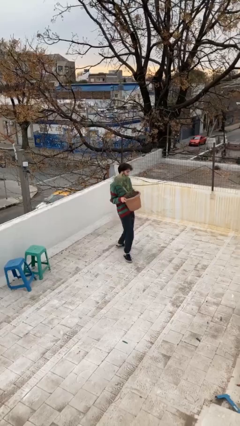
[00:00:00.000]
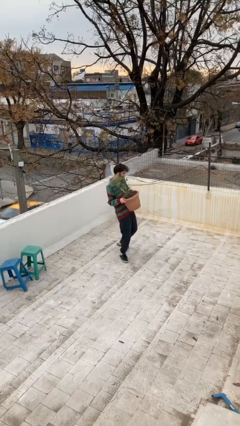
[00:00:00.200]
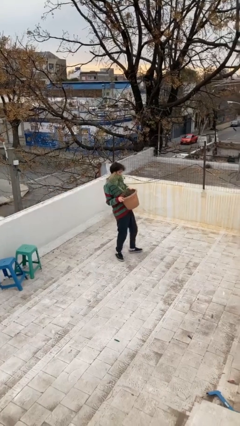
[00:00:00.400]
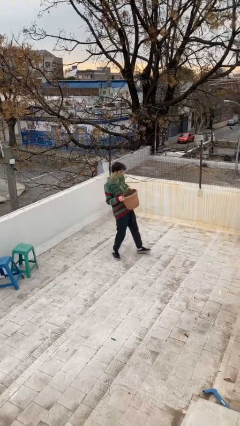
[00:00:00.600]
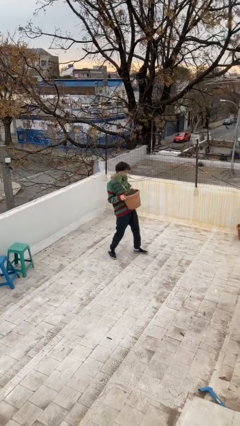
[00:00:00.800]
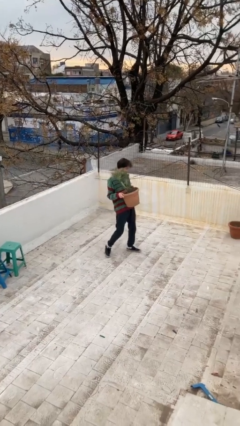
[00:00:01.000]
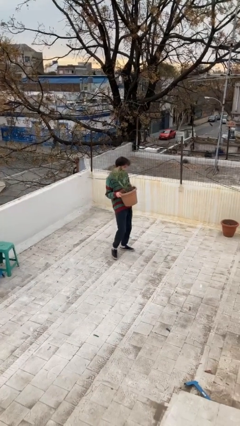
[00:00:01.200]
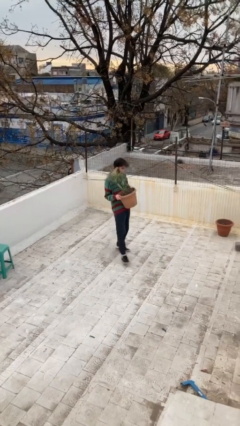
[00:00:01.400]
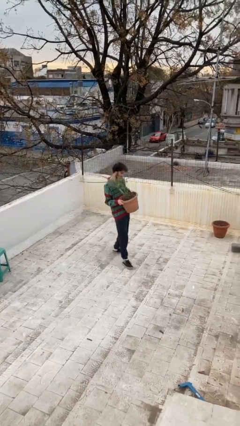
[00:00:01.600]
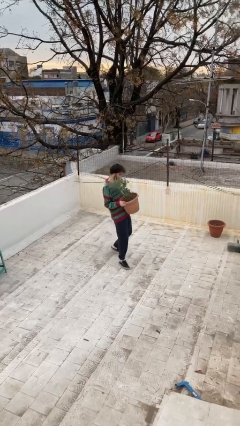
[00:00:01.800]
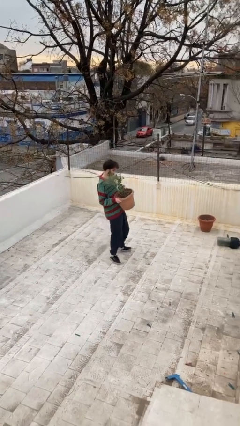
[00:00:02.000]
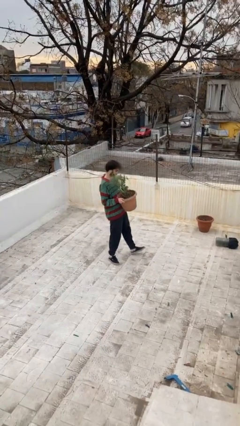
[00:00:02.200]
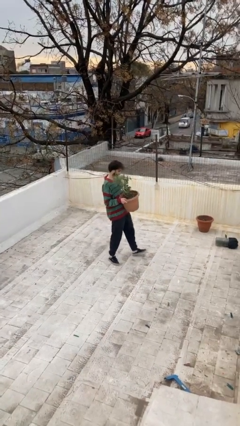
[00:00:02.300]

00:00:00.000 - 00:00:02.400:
person carries heavy object

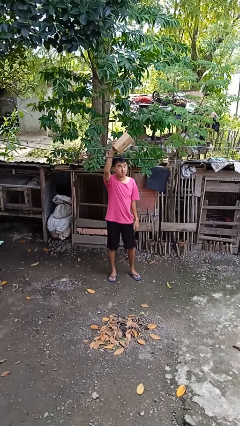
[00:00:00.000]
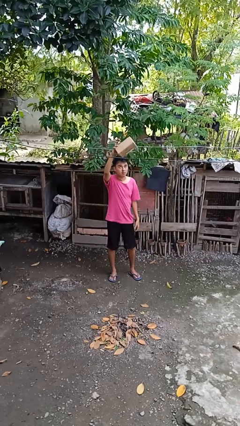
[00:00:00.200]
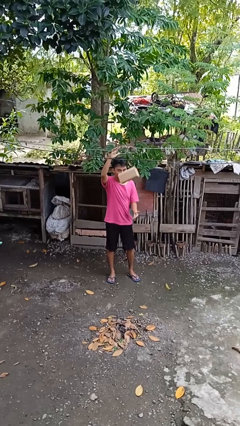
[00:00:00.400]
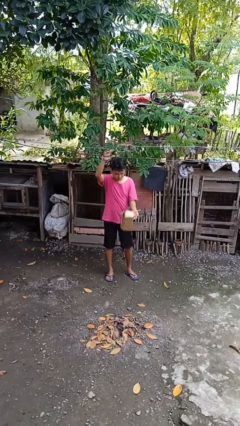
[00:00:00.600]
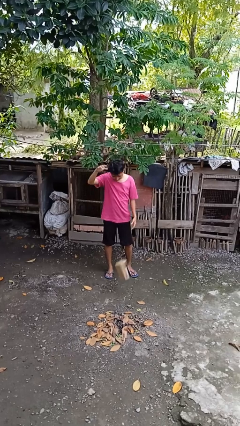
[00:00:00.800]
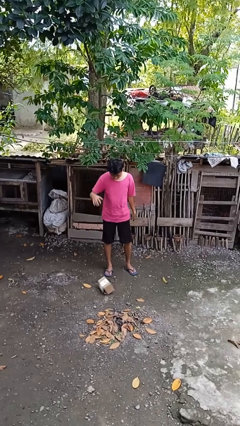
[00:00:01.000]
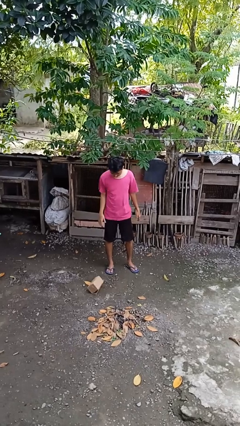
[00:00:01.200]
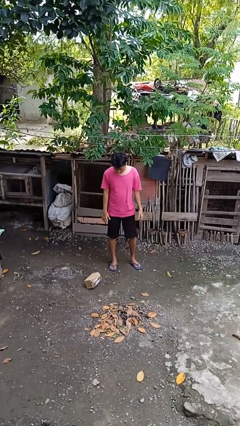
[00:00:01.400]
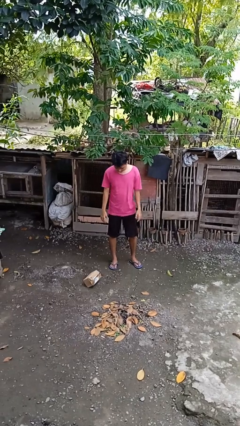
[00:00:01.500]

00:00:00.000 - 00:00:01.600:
person drops object

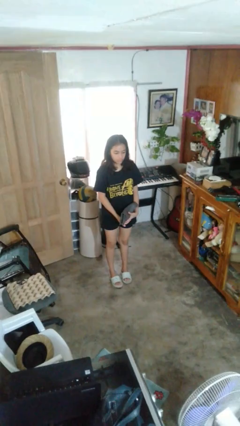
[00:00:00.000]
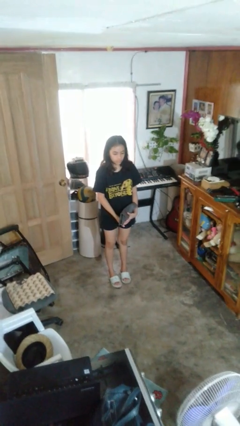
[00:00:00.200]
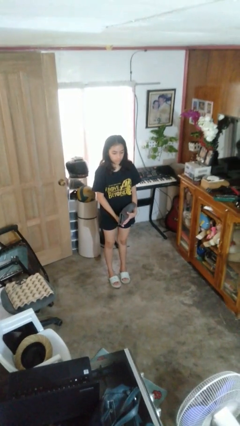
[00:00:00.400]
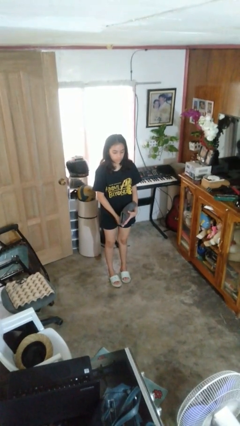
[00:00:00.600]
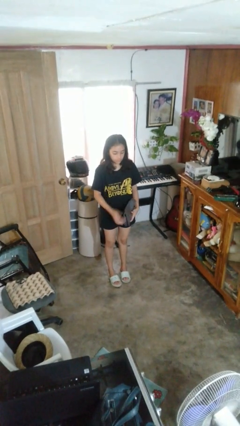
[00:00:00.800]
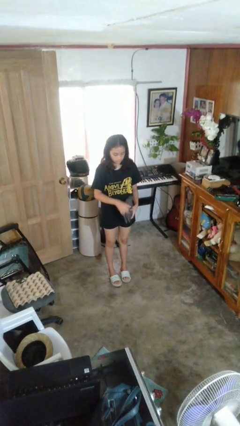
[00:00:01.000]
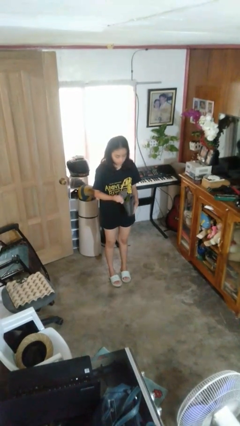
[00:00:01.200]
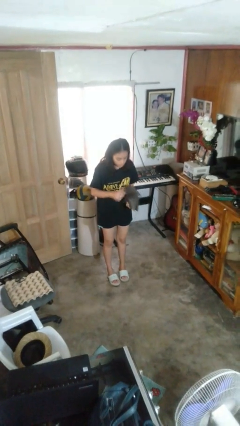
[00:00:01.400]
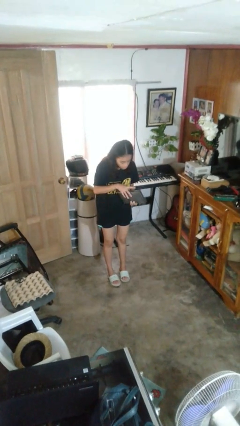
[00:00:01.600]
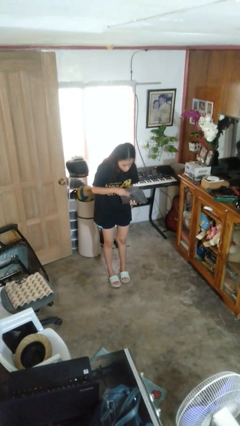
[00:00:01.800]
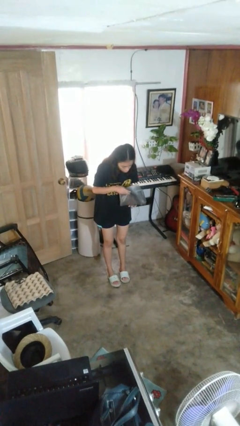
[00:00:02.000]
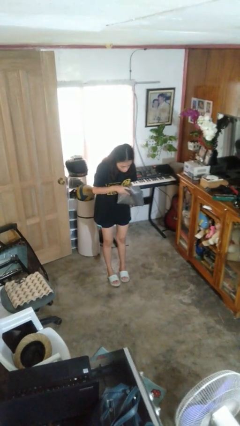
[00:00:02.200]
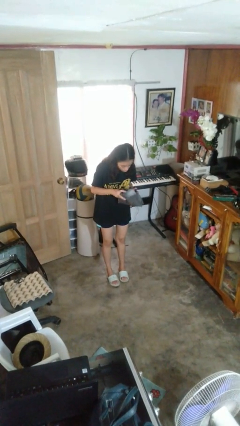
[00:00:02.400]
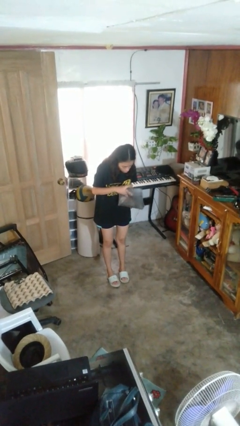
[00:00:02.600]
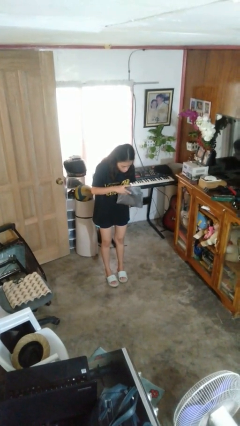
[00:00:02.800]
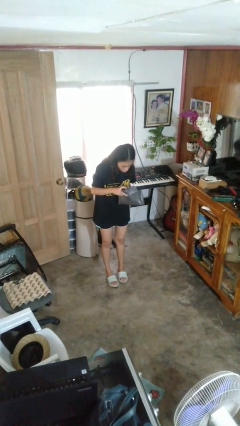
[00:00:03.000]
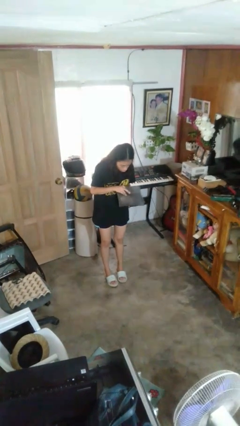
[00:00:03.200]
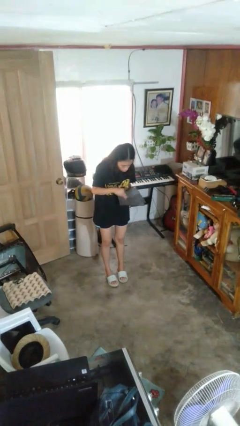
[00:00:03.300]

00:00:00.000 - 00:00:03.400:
person searches in purse

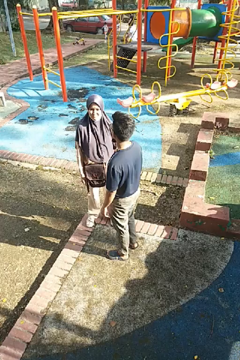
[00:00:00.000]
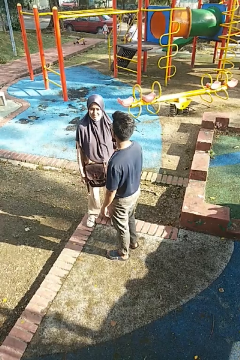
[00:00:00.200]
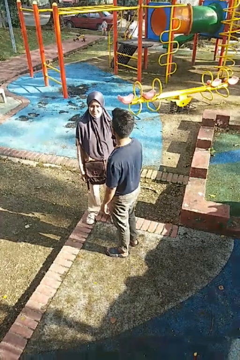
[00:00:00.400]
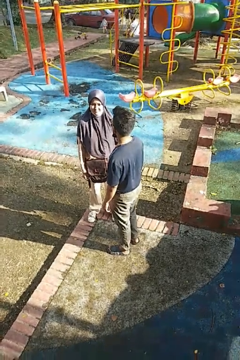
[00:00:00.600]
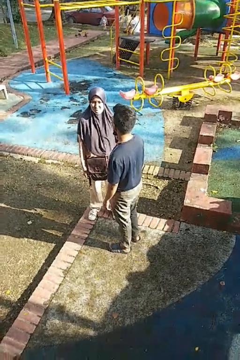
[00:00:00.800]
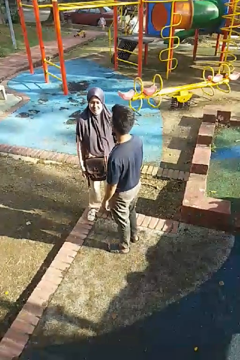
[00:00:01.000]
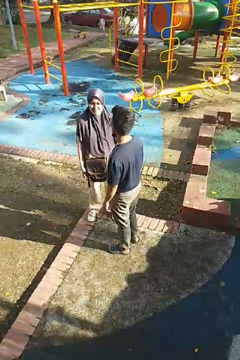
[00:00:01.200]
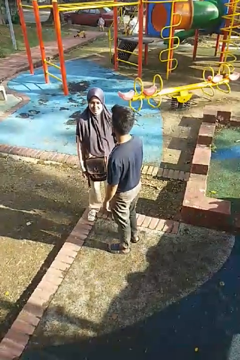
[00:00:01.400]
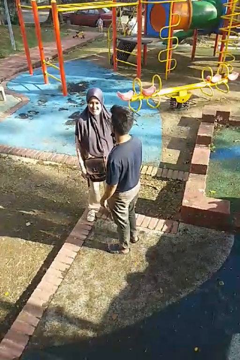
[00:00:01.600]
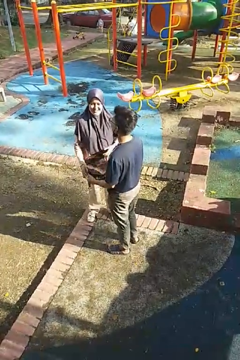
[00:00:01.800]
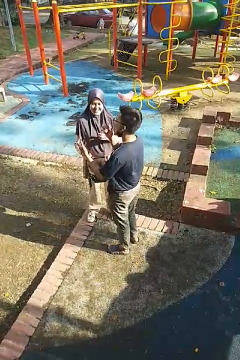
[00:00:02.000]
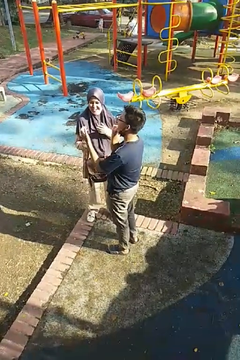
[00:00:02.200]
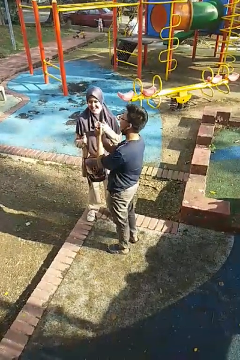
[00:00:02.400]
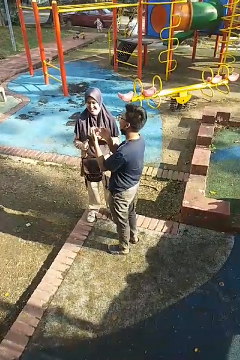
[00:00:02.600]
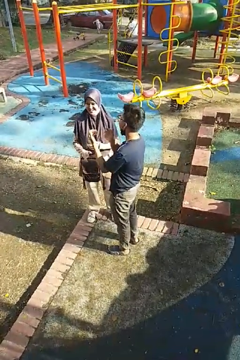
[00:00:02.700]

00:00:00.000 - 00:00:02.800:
person laughs with person

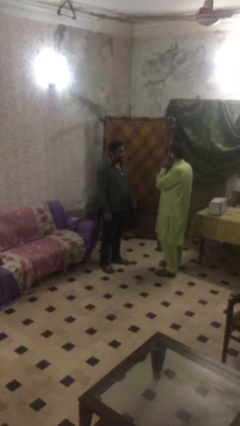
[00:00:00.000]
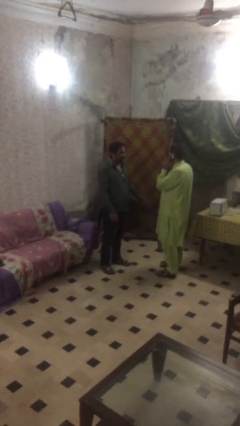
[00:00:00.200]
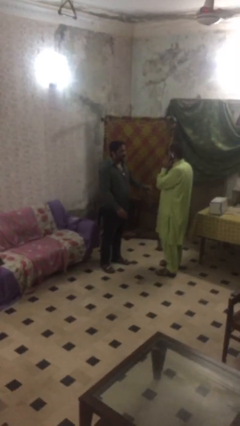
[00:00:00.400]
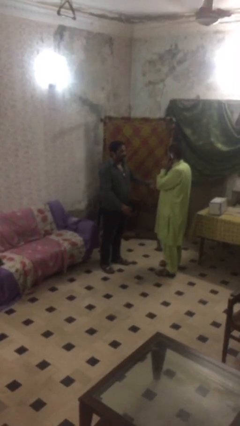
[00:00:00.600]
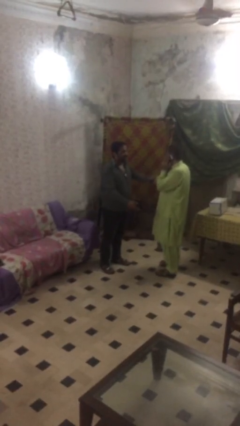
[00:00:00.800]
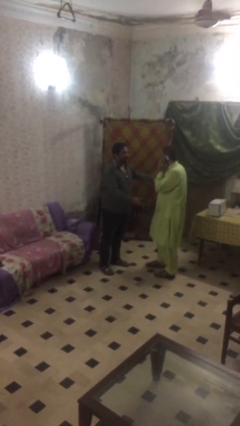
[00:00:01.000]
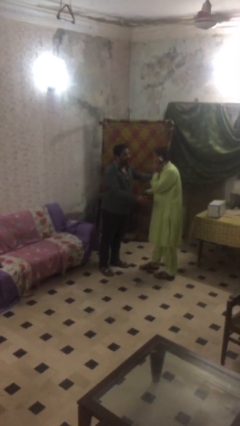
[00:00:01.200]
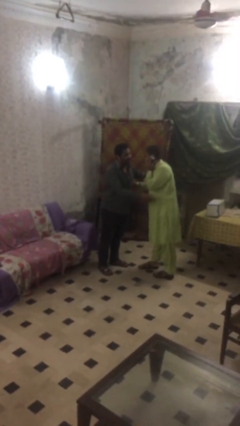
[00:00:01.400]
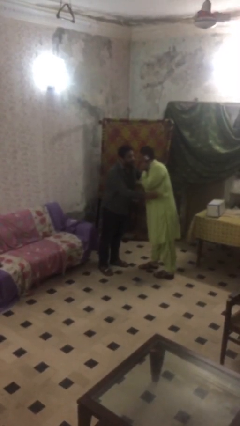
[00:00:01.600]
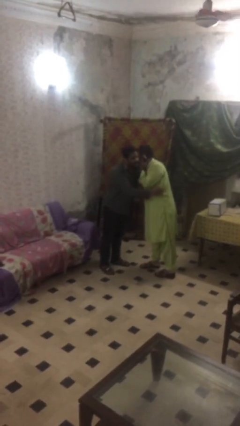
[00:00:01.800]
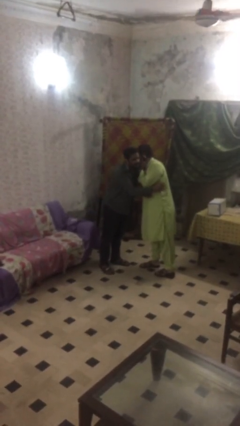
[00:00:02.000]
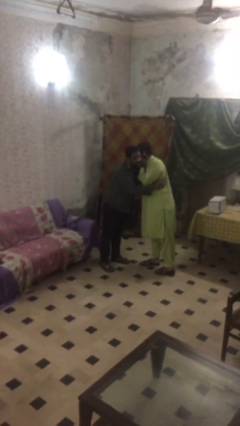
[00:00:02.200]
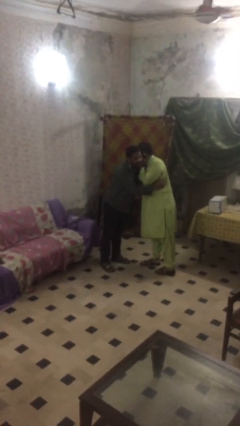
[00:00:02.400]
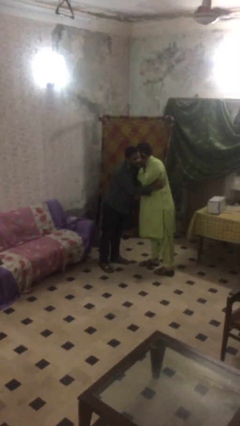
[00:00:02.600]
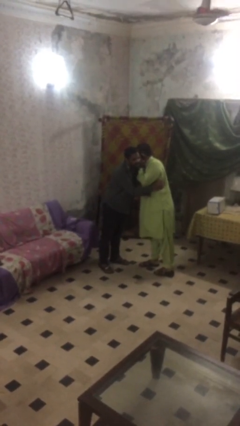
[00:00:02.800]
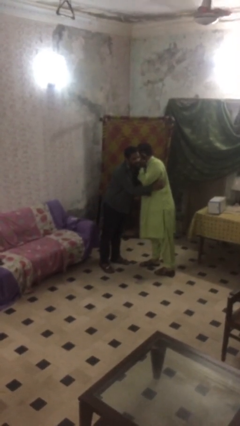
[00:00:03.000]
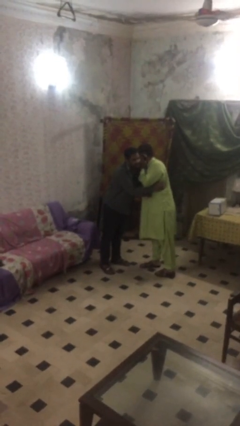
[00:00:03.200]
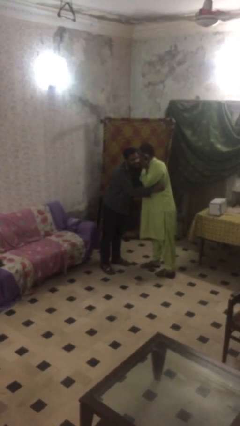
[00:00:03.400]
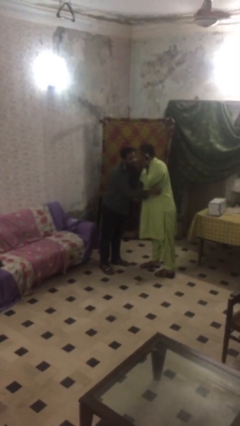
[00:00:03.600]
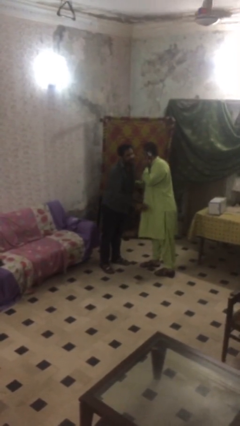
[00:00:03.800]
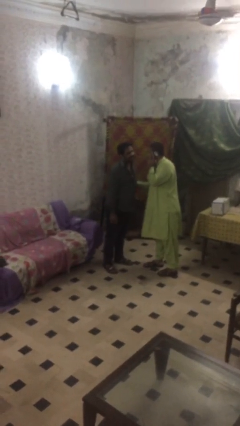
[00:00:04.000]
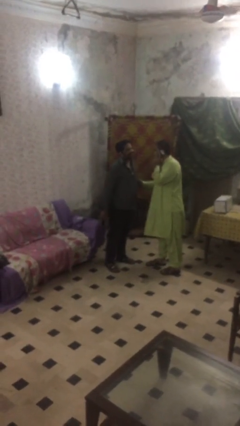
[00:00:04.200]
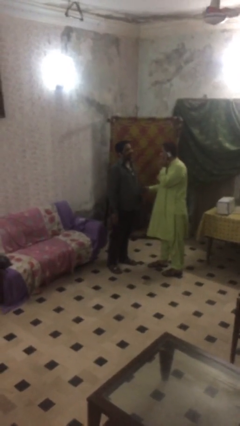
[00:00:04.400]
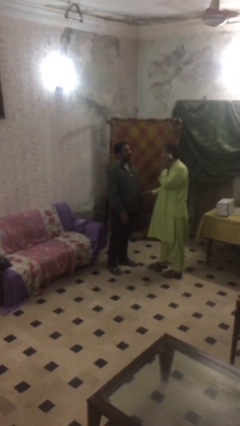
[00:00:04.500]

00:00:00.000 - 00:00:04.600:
person embraces person

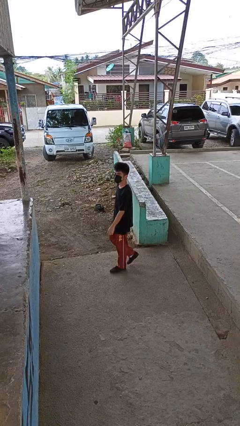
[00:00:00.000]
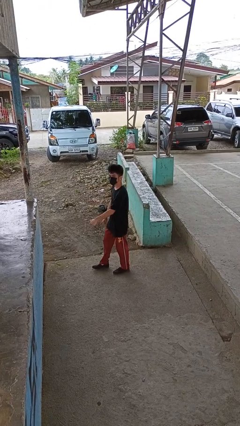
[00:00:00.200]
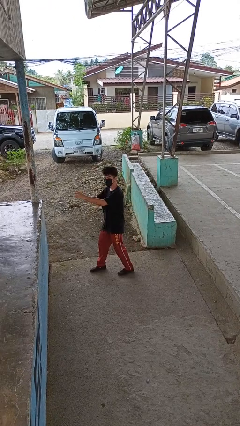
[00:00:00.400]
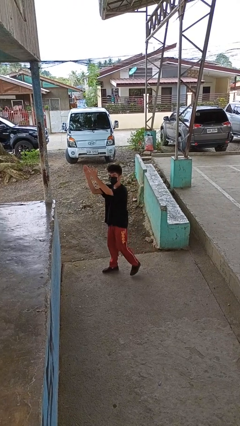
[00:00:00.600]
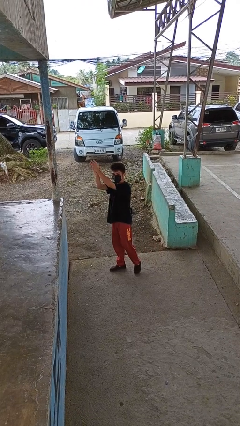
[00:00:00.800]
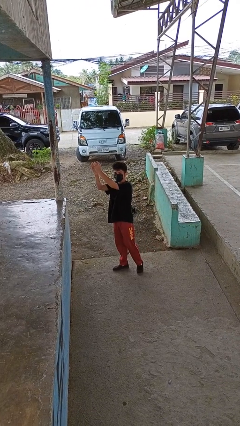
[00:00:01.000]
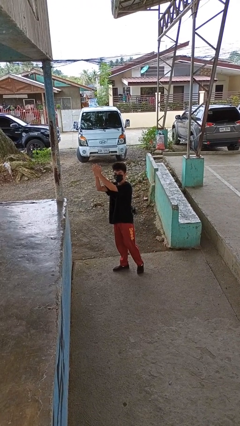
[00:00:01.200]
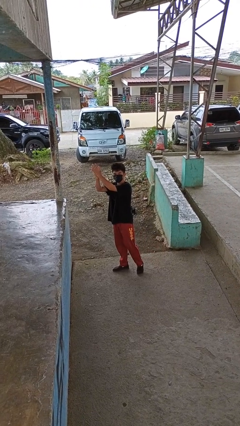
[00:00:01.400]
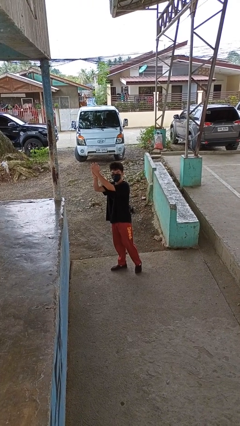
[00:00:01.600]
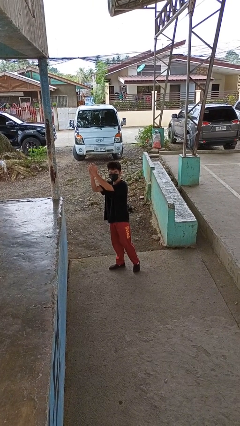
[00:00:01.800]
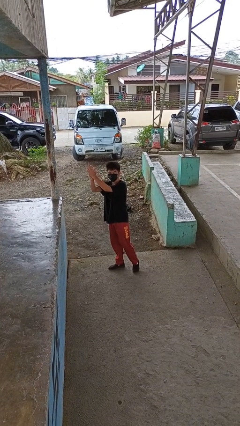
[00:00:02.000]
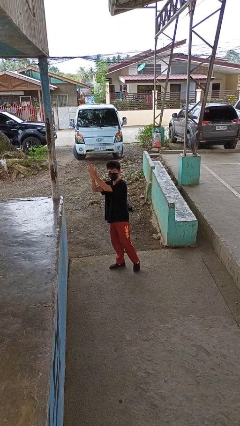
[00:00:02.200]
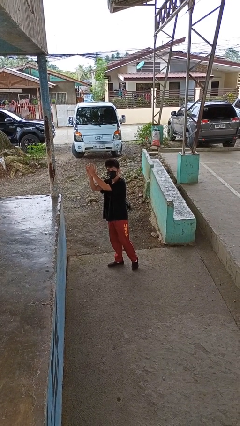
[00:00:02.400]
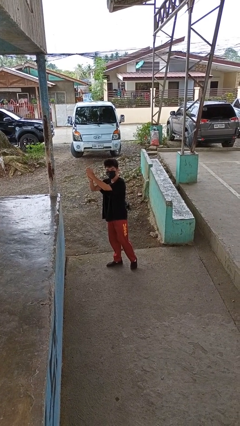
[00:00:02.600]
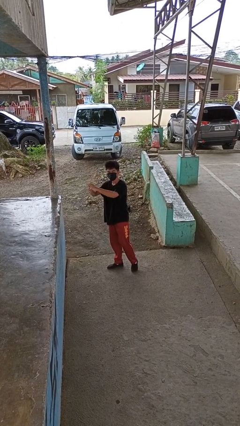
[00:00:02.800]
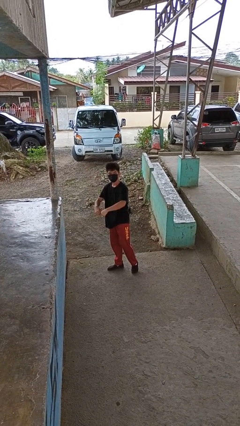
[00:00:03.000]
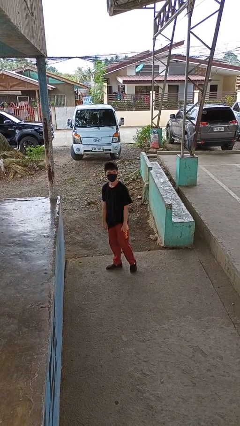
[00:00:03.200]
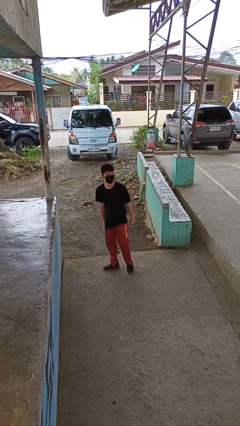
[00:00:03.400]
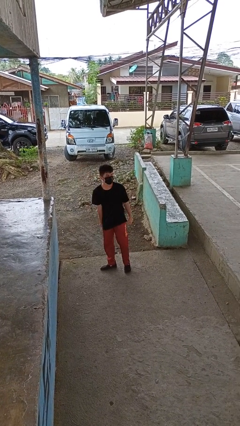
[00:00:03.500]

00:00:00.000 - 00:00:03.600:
person claps hands
